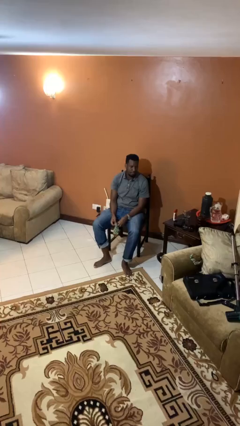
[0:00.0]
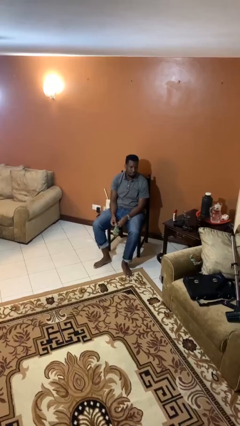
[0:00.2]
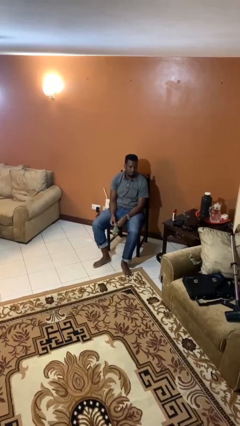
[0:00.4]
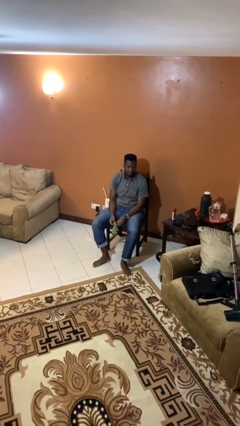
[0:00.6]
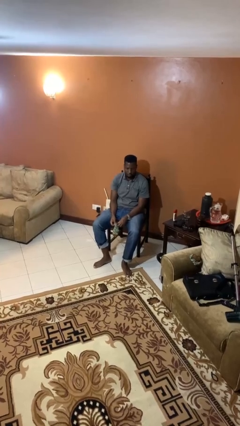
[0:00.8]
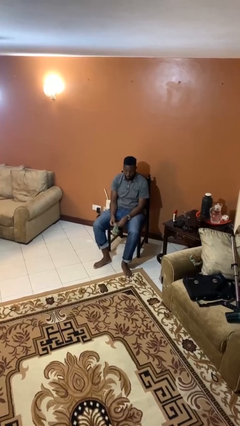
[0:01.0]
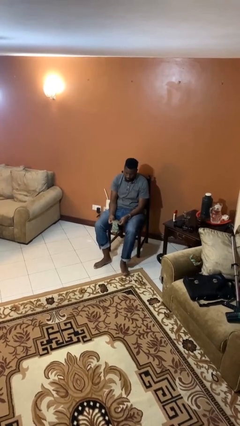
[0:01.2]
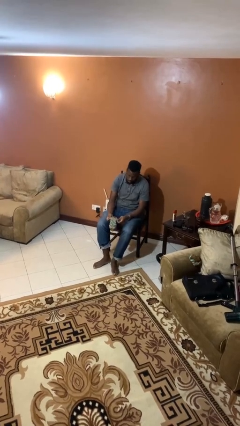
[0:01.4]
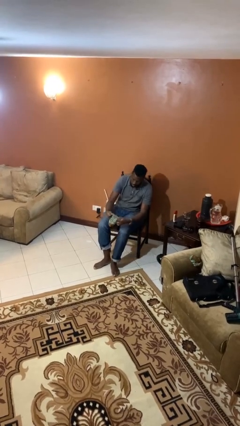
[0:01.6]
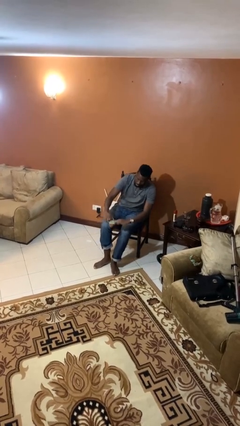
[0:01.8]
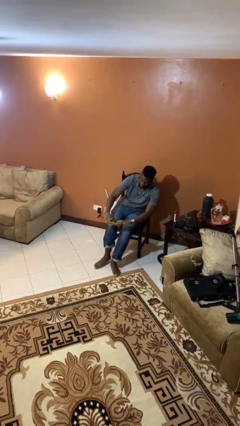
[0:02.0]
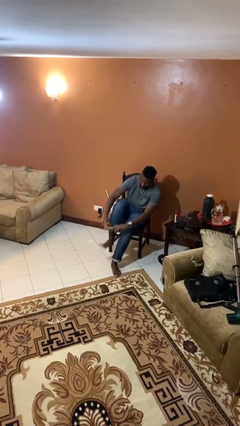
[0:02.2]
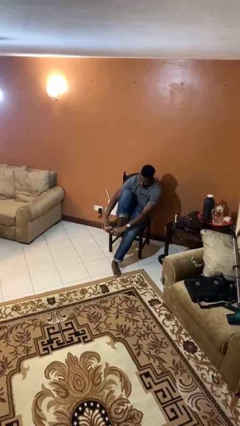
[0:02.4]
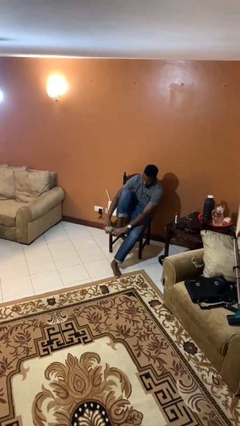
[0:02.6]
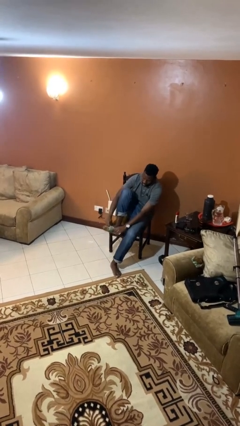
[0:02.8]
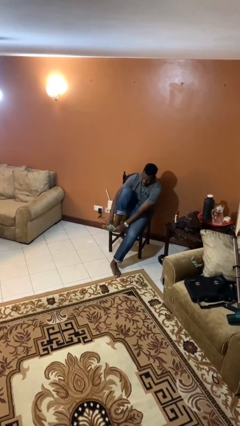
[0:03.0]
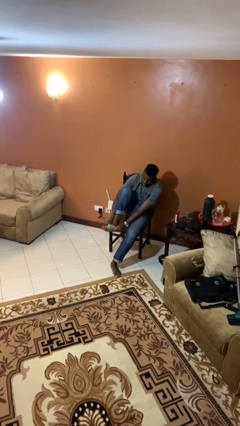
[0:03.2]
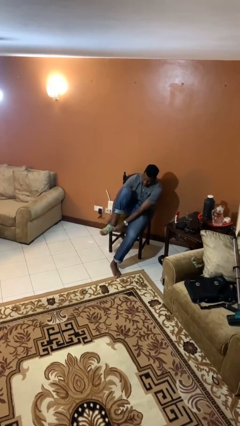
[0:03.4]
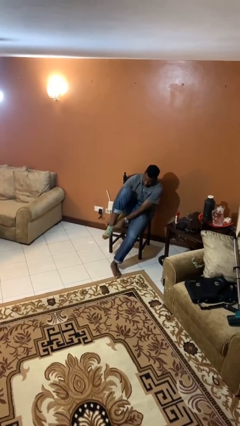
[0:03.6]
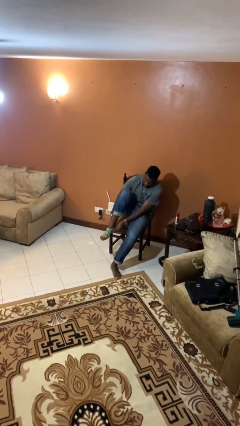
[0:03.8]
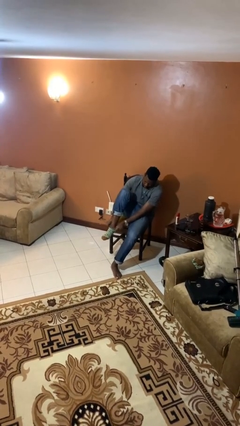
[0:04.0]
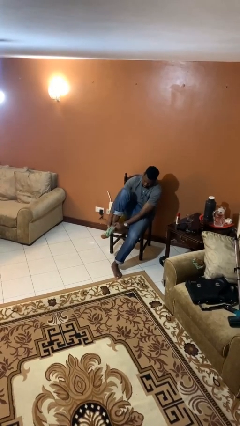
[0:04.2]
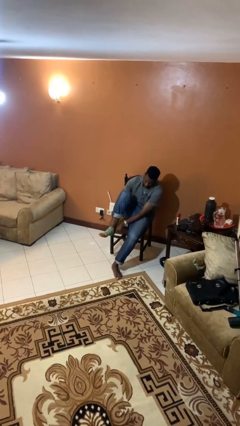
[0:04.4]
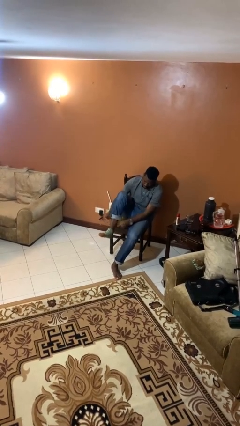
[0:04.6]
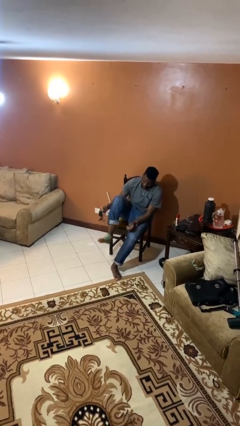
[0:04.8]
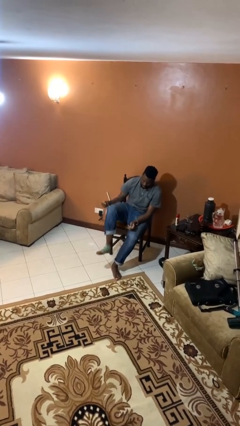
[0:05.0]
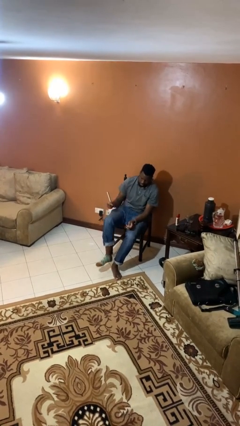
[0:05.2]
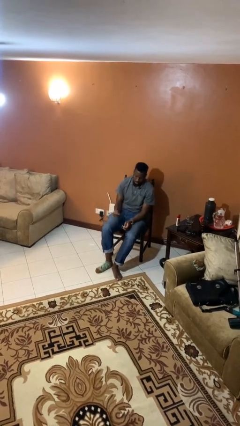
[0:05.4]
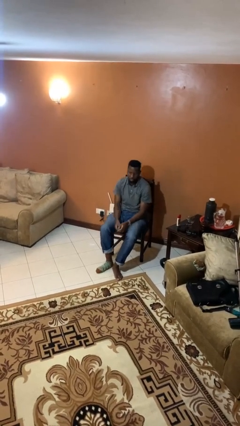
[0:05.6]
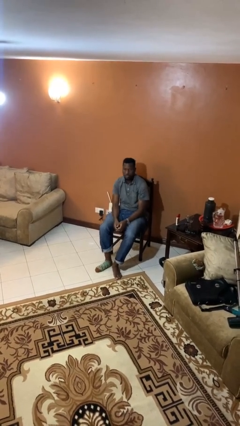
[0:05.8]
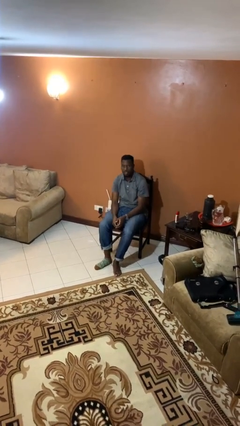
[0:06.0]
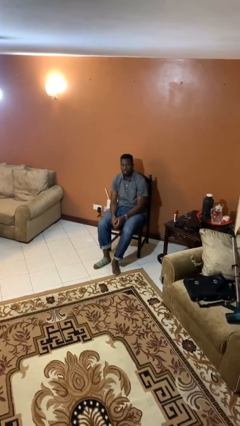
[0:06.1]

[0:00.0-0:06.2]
person puts on socks

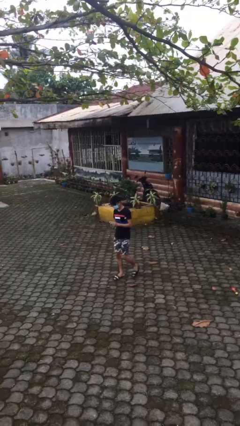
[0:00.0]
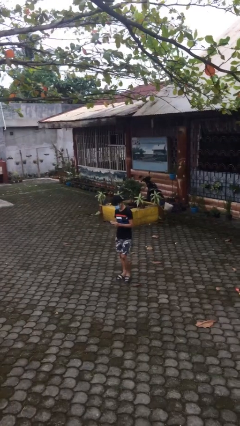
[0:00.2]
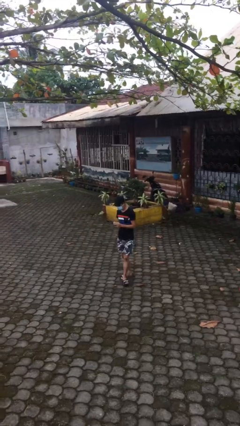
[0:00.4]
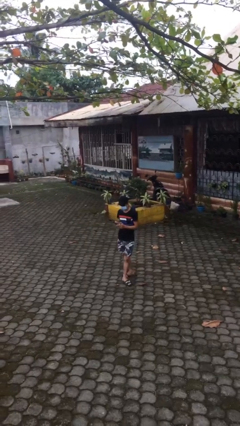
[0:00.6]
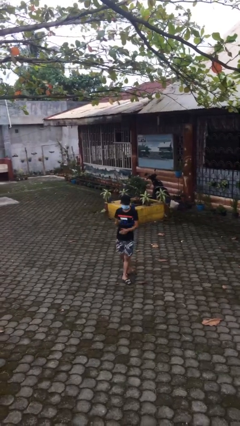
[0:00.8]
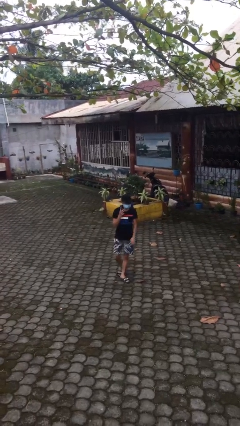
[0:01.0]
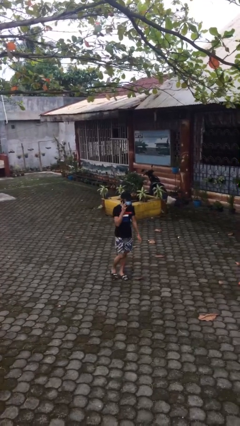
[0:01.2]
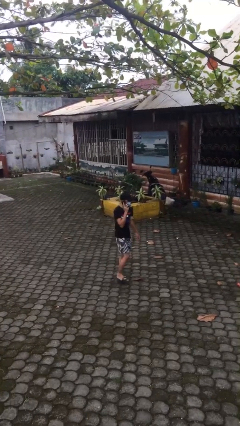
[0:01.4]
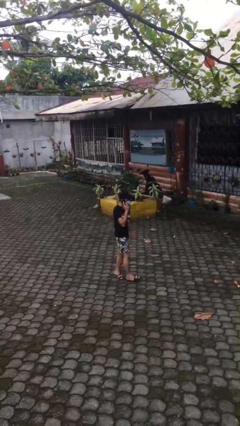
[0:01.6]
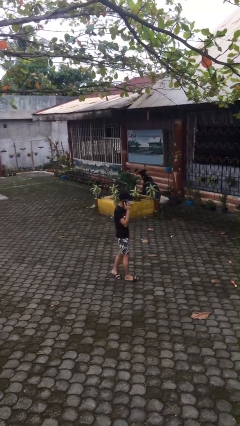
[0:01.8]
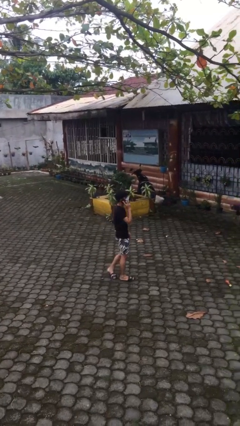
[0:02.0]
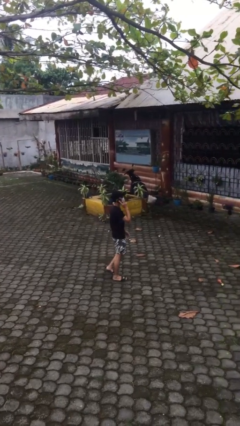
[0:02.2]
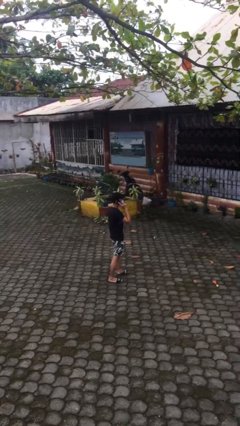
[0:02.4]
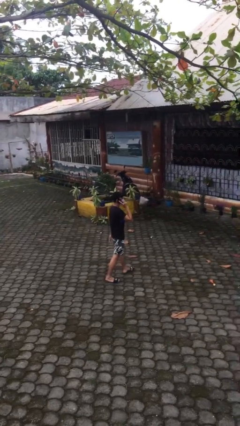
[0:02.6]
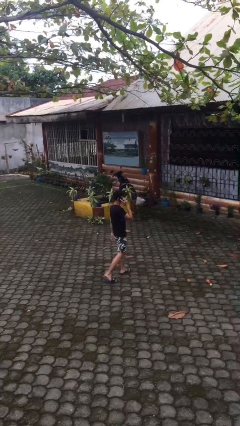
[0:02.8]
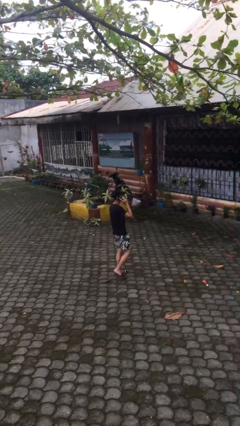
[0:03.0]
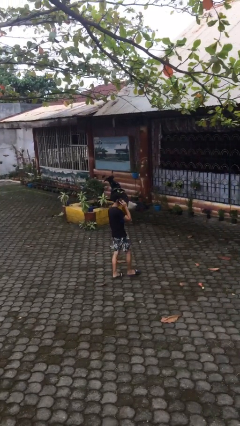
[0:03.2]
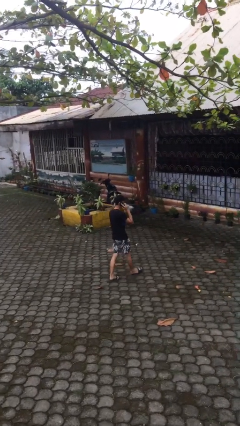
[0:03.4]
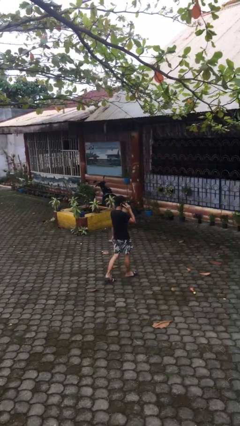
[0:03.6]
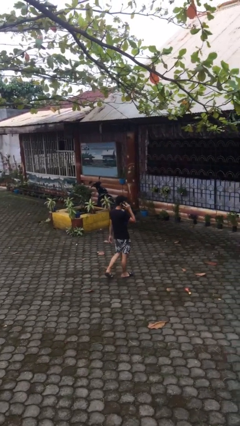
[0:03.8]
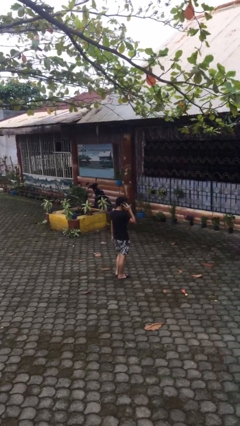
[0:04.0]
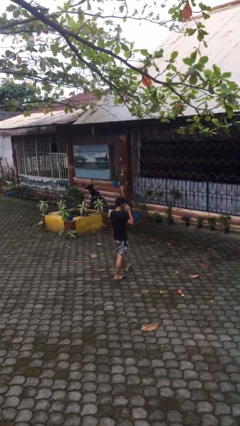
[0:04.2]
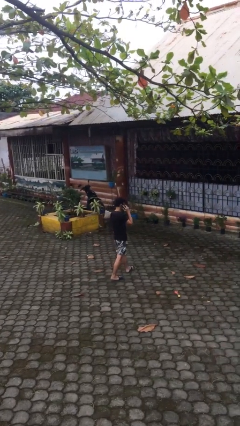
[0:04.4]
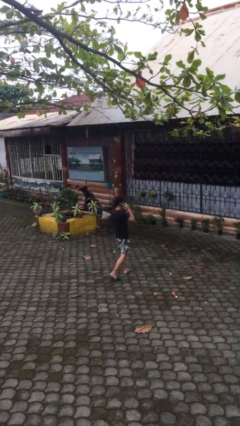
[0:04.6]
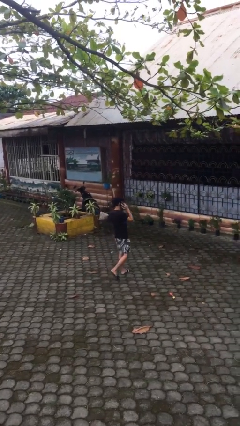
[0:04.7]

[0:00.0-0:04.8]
person talks on phone

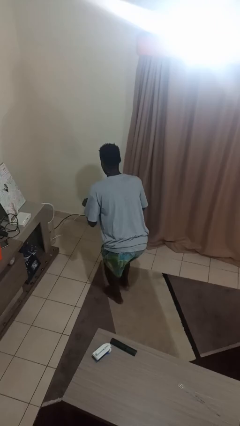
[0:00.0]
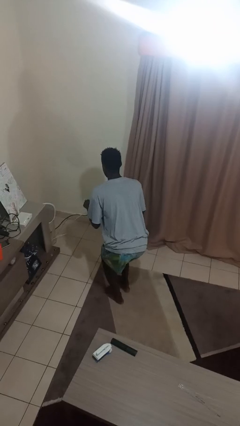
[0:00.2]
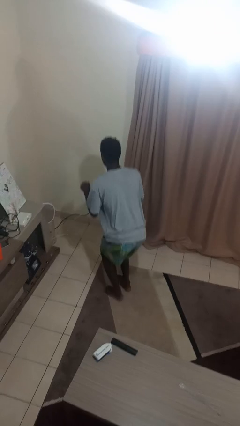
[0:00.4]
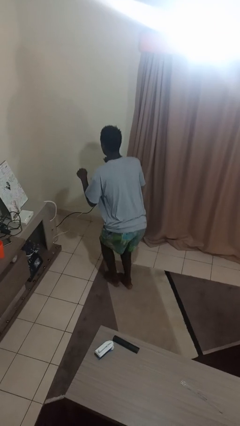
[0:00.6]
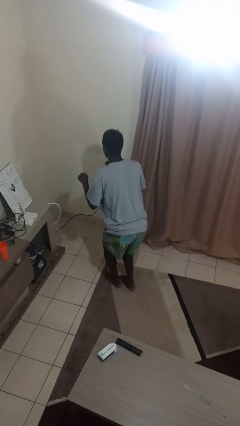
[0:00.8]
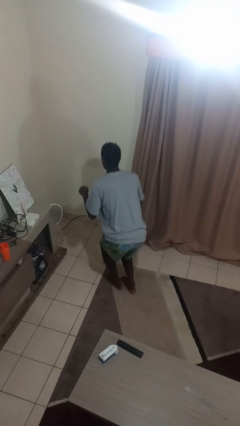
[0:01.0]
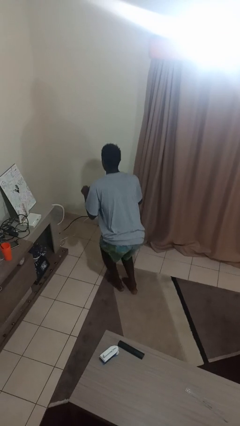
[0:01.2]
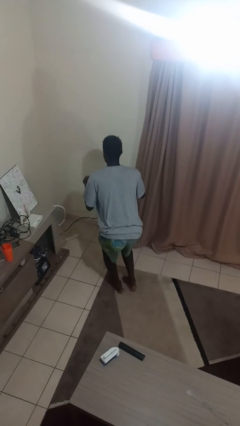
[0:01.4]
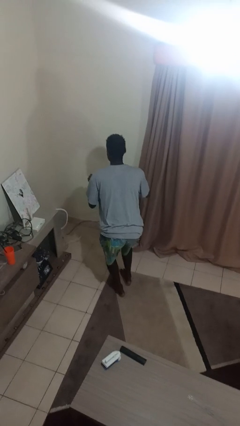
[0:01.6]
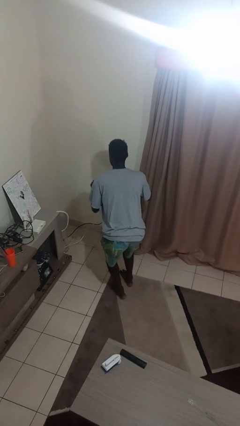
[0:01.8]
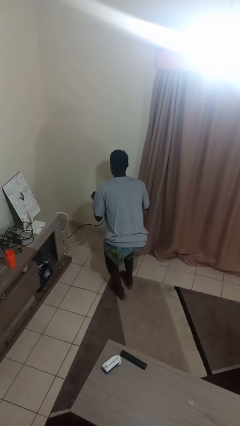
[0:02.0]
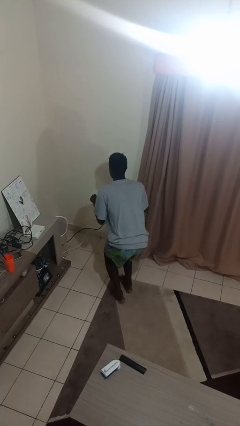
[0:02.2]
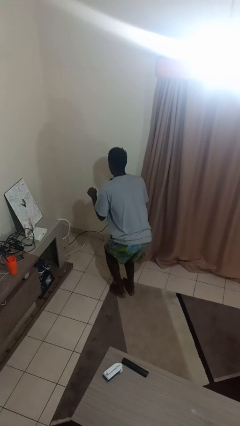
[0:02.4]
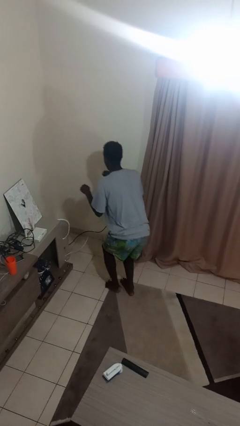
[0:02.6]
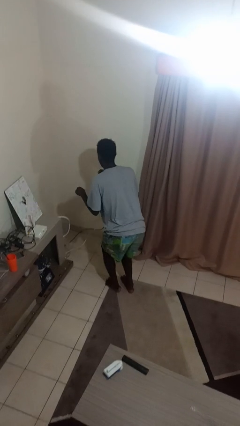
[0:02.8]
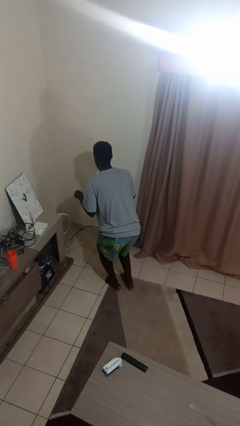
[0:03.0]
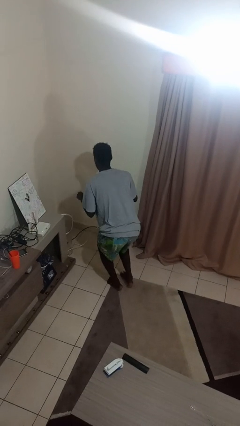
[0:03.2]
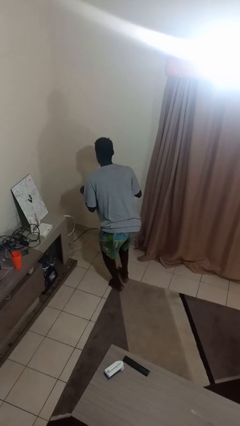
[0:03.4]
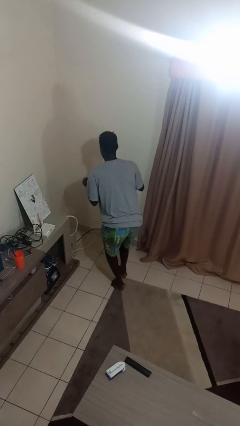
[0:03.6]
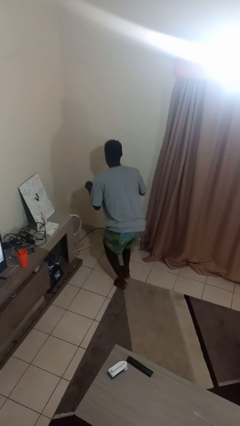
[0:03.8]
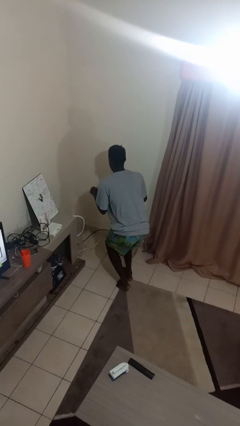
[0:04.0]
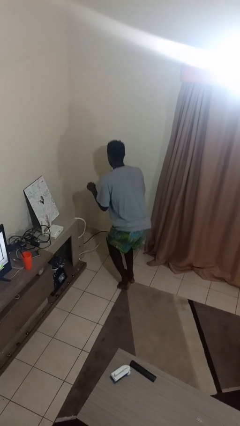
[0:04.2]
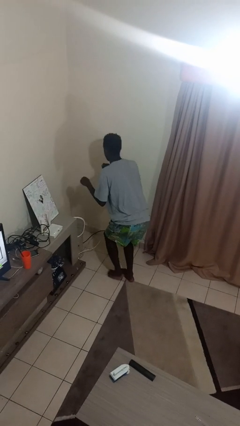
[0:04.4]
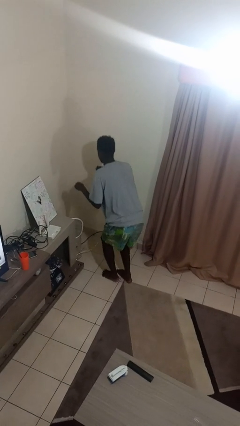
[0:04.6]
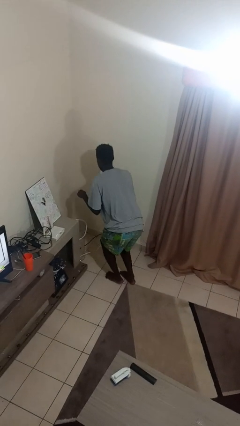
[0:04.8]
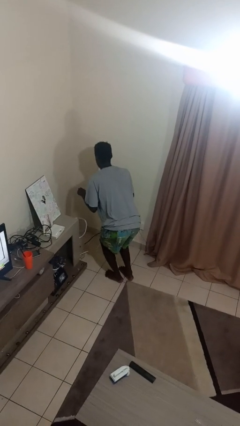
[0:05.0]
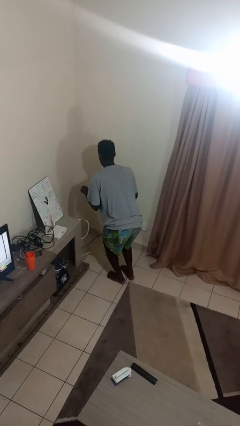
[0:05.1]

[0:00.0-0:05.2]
person walks tiptoe

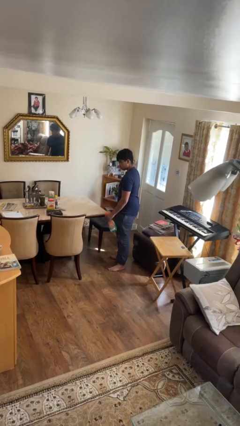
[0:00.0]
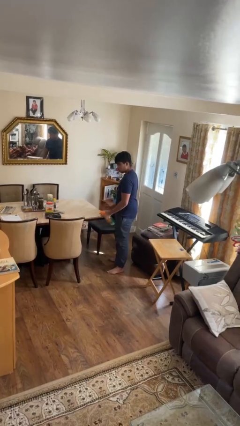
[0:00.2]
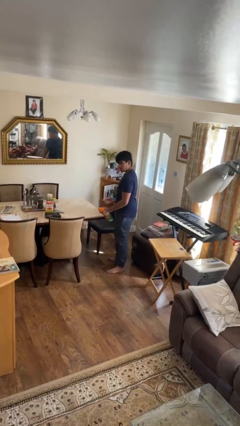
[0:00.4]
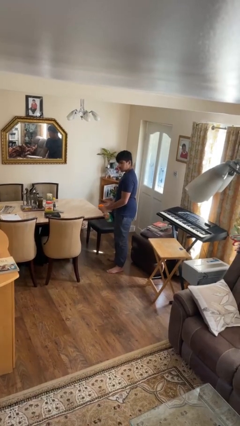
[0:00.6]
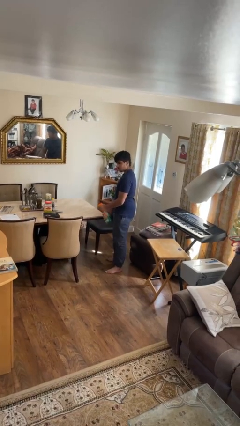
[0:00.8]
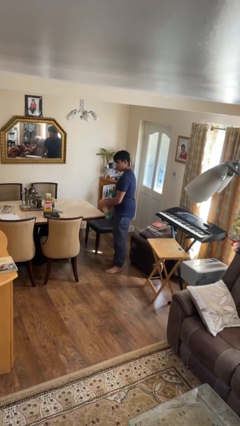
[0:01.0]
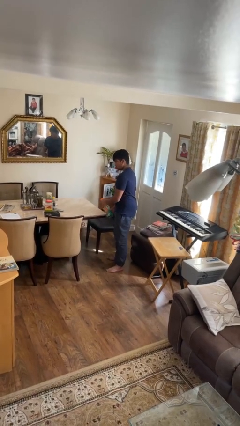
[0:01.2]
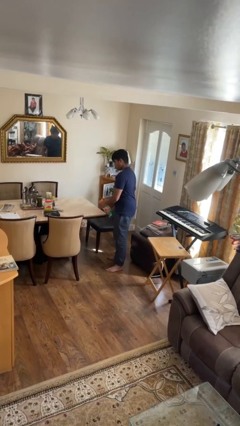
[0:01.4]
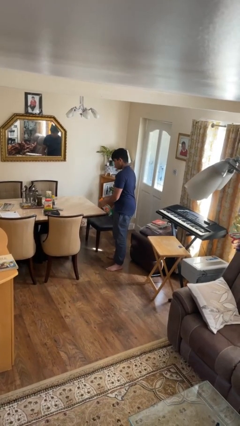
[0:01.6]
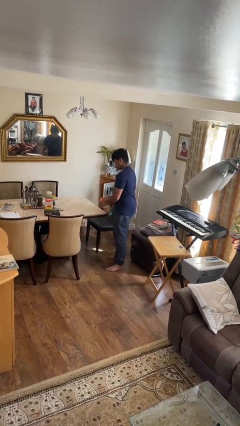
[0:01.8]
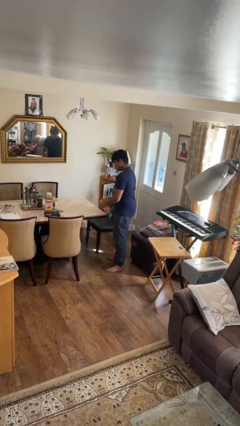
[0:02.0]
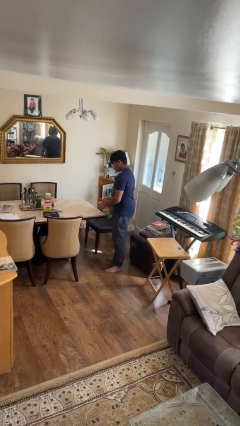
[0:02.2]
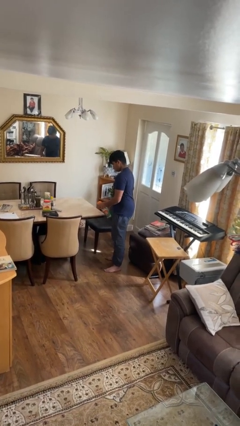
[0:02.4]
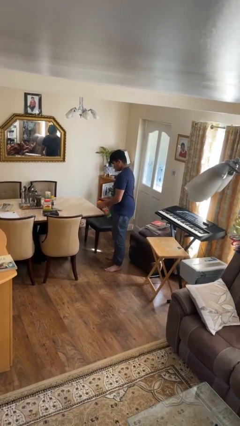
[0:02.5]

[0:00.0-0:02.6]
person sprays from bottle
